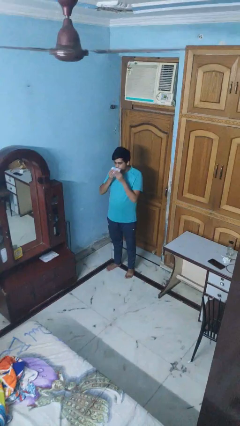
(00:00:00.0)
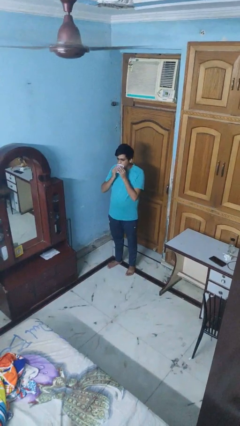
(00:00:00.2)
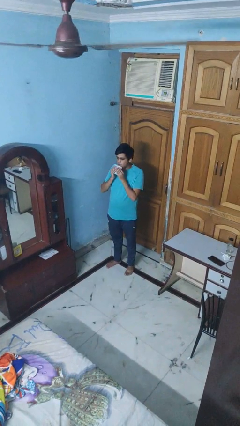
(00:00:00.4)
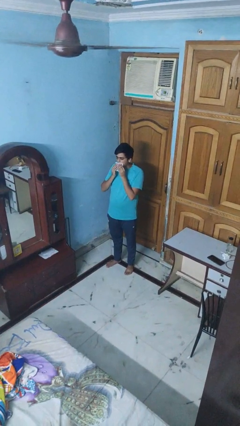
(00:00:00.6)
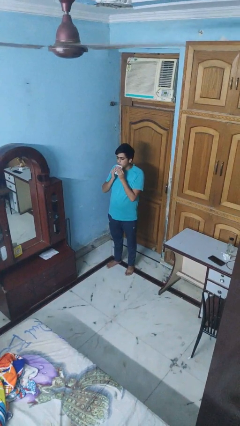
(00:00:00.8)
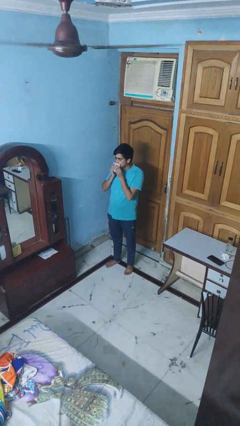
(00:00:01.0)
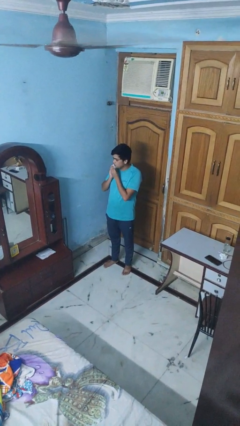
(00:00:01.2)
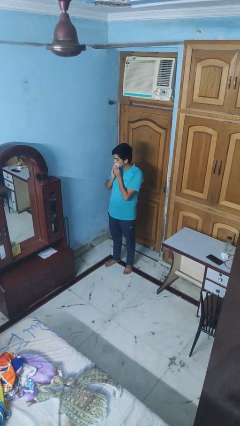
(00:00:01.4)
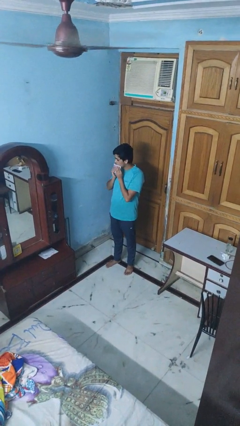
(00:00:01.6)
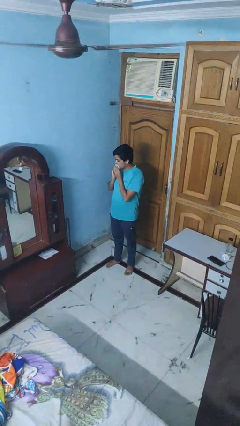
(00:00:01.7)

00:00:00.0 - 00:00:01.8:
person wipes mouth with napkin

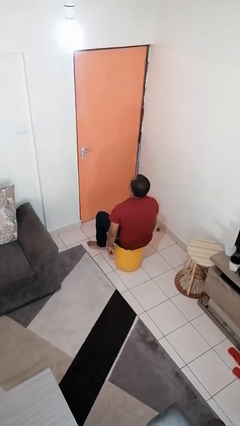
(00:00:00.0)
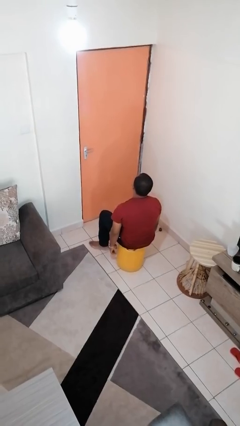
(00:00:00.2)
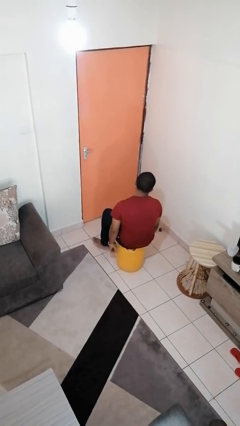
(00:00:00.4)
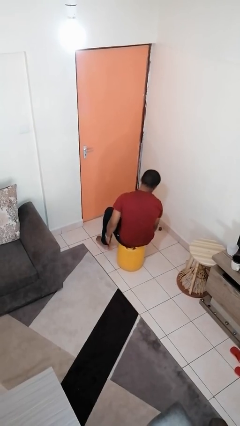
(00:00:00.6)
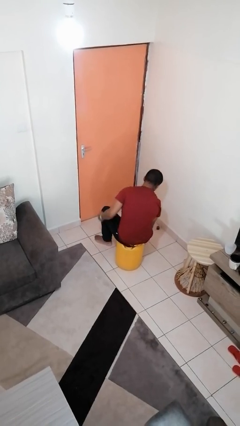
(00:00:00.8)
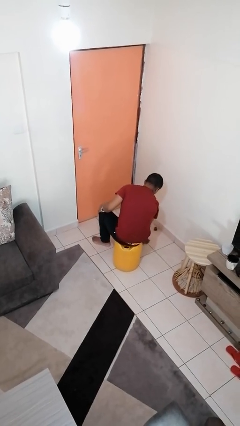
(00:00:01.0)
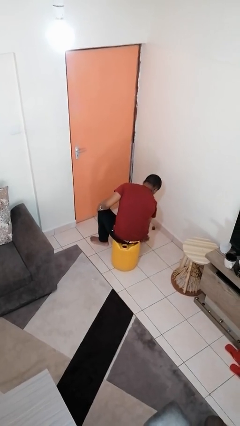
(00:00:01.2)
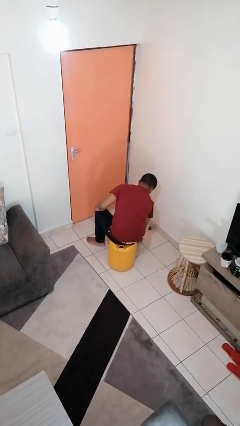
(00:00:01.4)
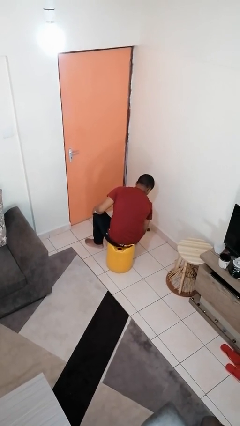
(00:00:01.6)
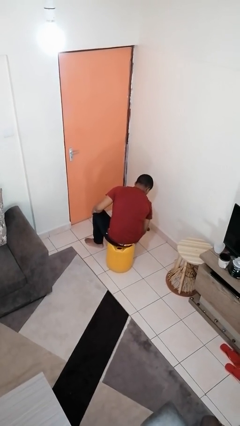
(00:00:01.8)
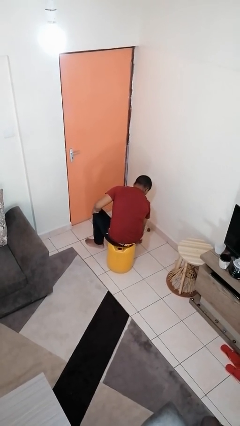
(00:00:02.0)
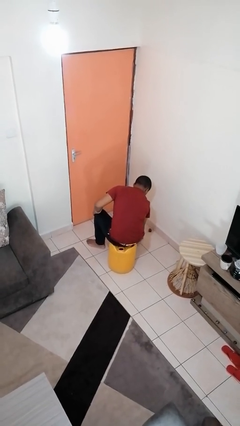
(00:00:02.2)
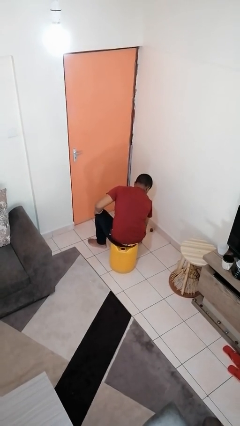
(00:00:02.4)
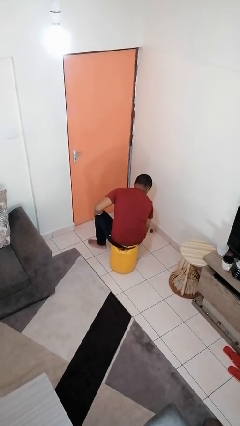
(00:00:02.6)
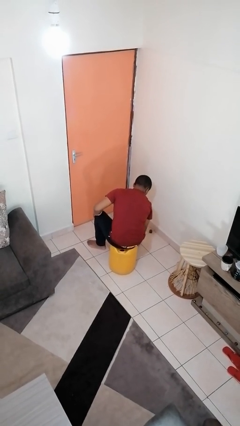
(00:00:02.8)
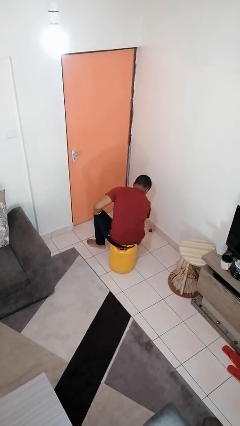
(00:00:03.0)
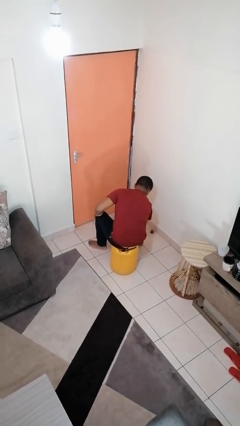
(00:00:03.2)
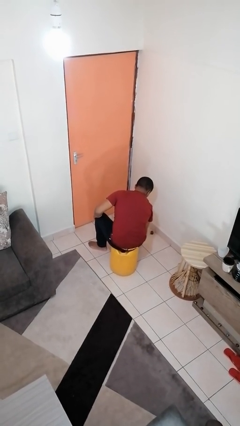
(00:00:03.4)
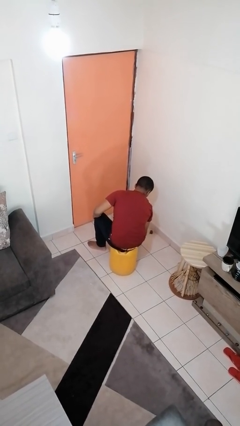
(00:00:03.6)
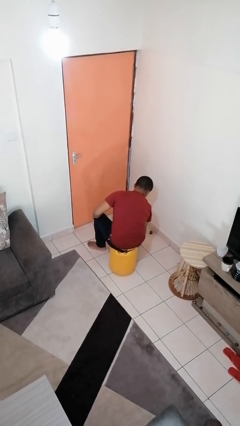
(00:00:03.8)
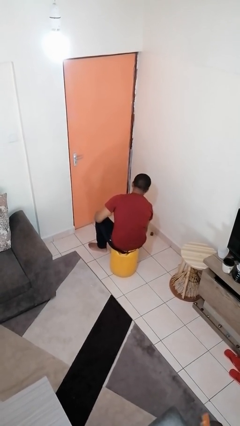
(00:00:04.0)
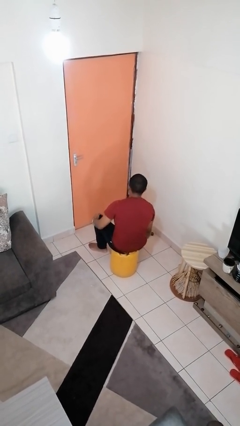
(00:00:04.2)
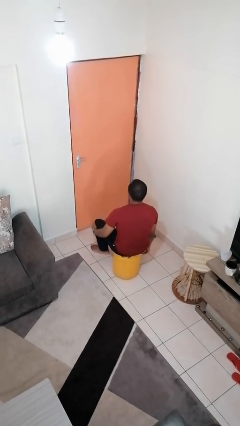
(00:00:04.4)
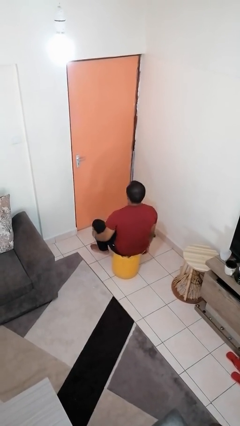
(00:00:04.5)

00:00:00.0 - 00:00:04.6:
person rubs foot

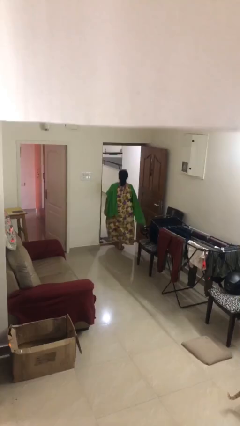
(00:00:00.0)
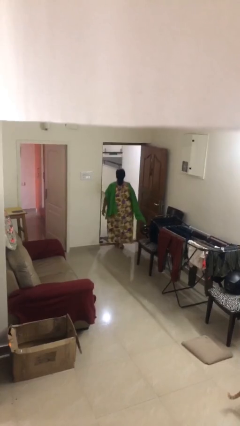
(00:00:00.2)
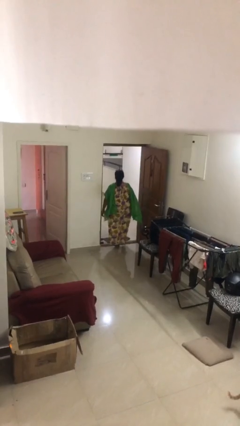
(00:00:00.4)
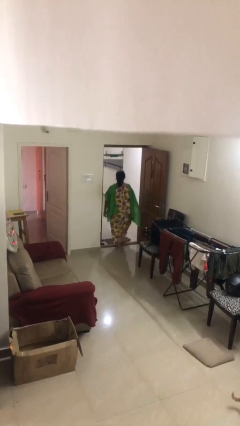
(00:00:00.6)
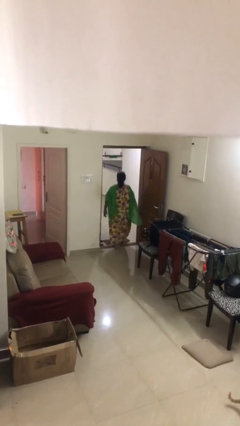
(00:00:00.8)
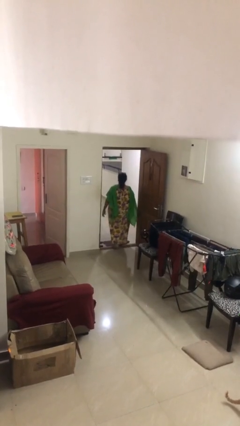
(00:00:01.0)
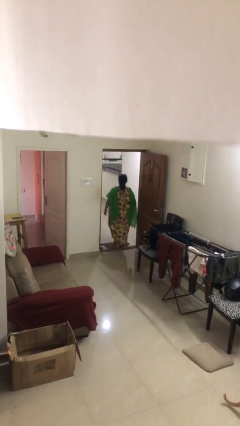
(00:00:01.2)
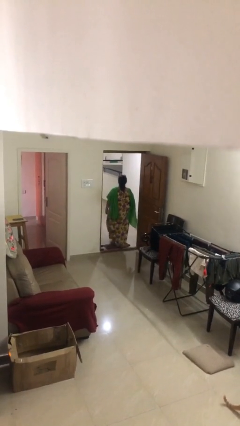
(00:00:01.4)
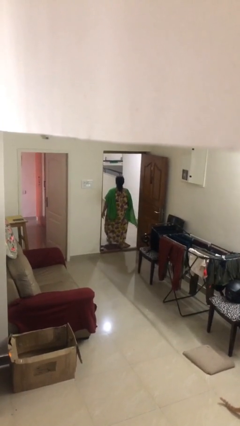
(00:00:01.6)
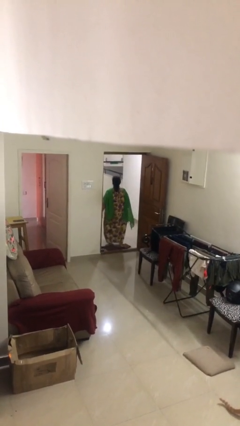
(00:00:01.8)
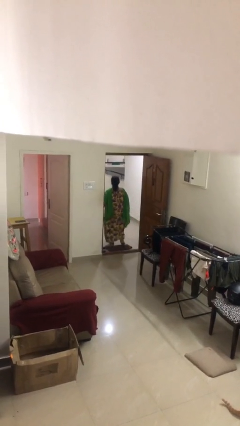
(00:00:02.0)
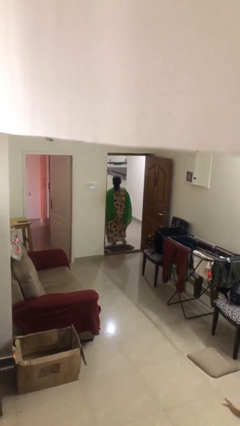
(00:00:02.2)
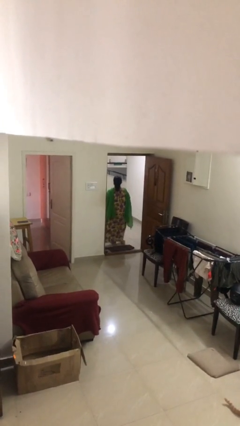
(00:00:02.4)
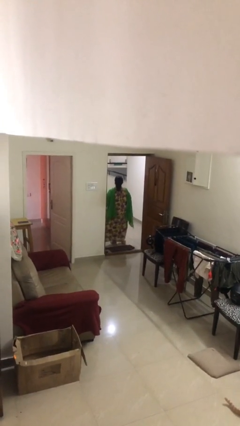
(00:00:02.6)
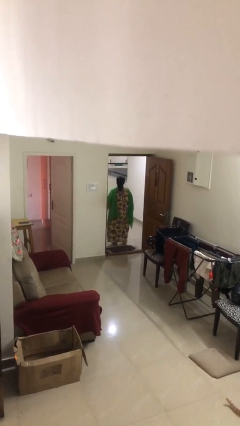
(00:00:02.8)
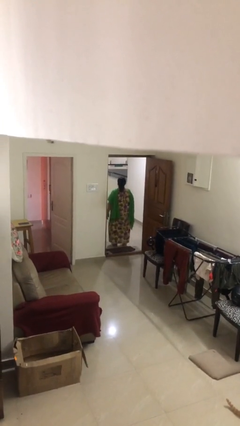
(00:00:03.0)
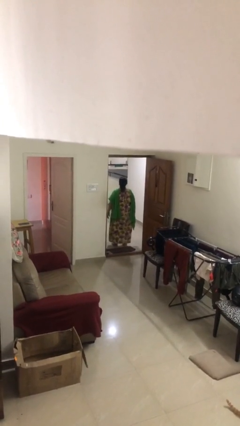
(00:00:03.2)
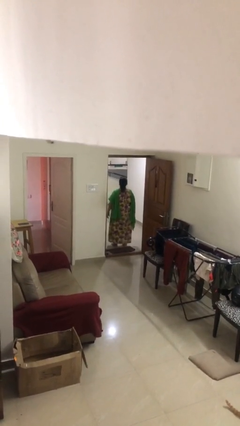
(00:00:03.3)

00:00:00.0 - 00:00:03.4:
person exits scene through structure

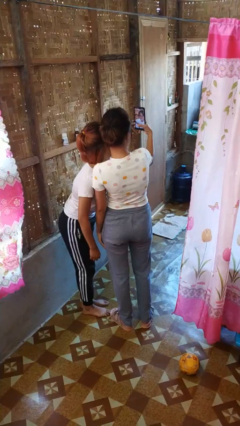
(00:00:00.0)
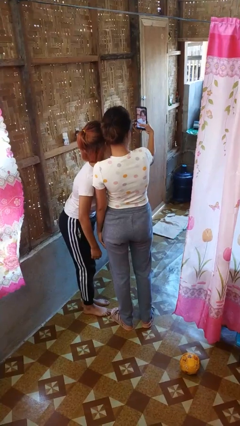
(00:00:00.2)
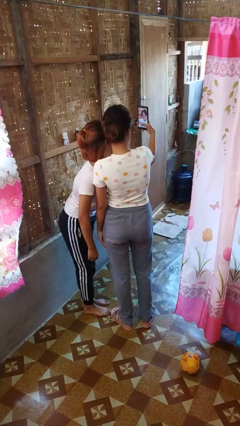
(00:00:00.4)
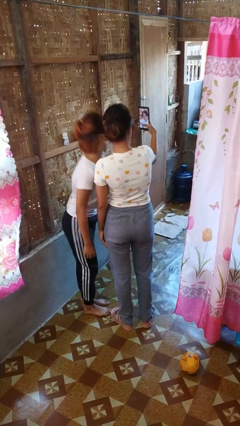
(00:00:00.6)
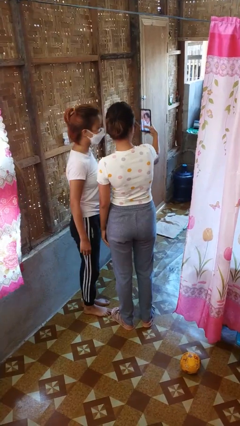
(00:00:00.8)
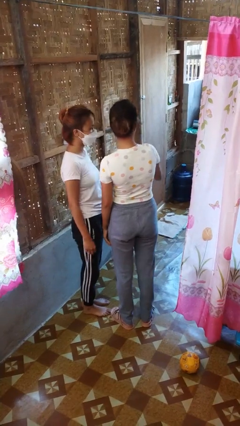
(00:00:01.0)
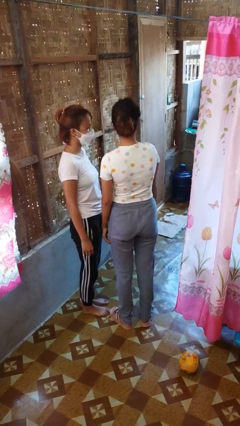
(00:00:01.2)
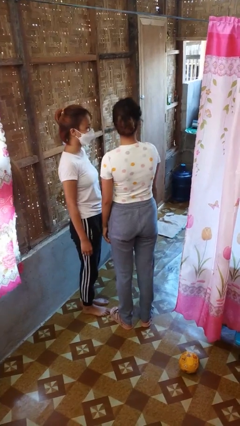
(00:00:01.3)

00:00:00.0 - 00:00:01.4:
person takes selfie with person

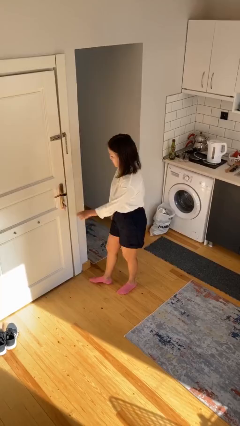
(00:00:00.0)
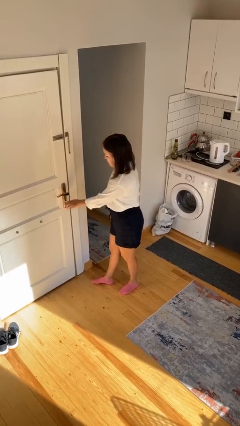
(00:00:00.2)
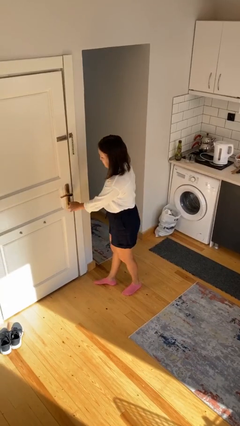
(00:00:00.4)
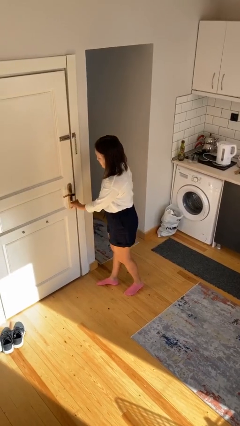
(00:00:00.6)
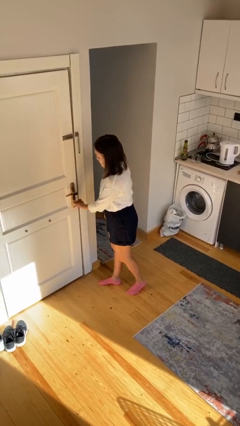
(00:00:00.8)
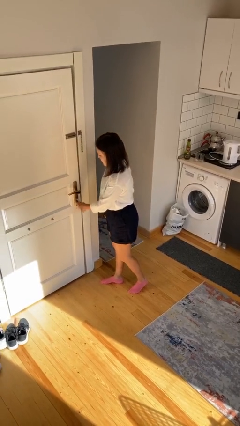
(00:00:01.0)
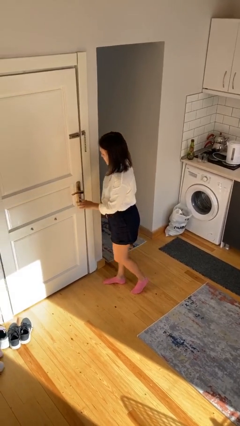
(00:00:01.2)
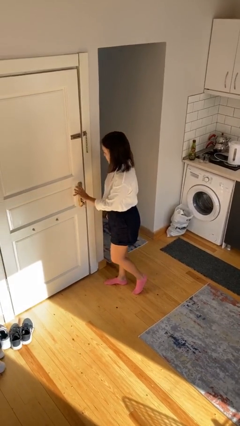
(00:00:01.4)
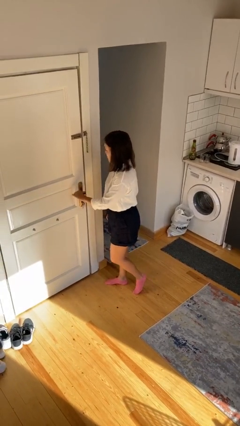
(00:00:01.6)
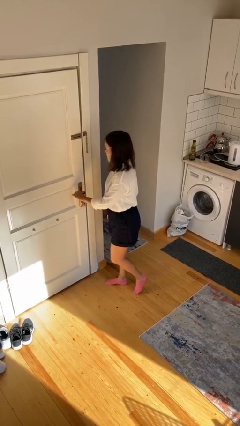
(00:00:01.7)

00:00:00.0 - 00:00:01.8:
person unlocks door with keys

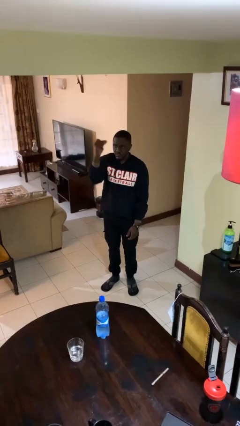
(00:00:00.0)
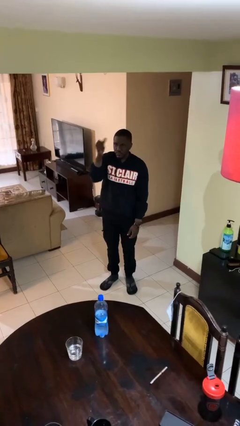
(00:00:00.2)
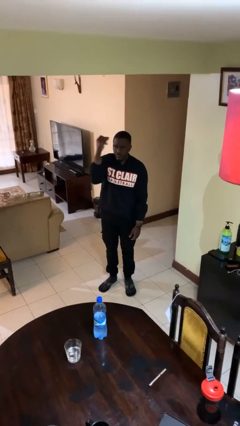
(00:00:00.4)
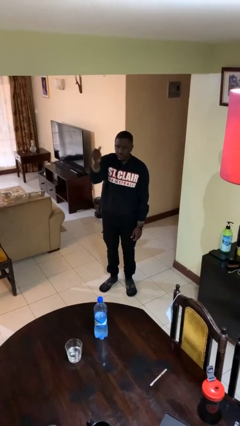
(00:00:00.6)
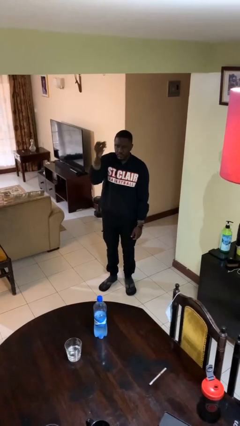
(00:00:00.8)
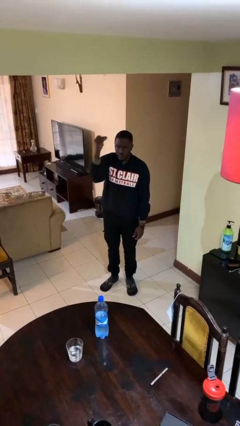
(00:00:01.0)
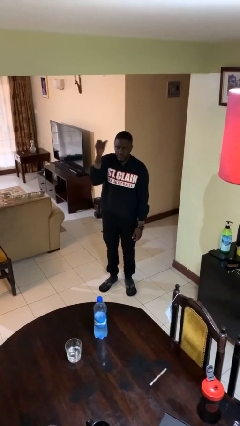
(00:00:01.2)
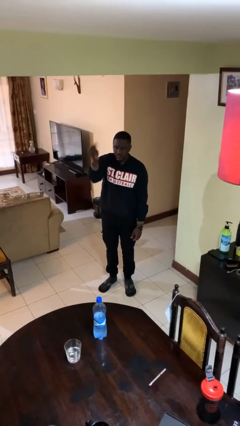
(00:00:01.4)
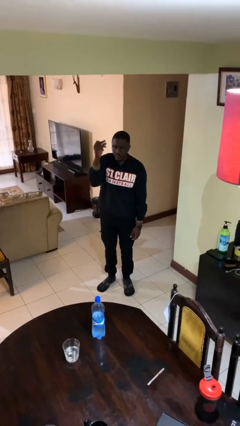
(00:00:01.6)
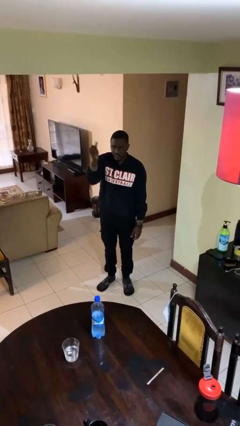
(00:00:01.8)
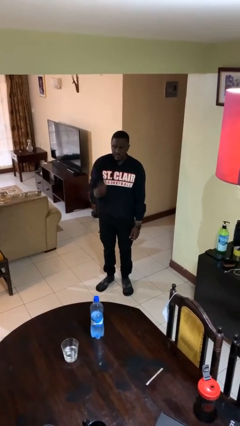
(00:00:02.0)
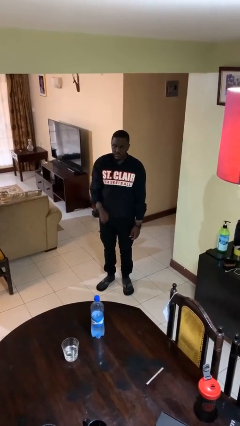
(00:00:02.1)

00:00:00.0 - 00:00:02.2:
person snaps fingers

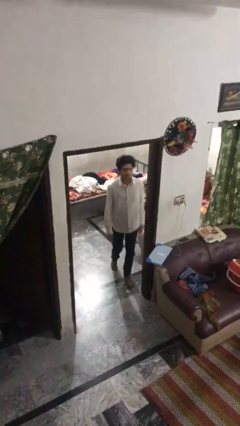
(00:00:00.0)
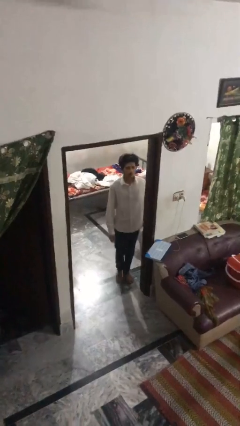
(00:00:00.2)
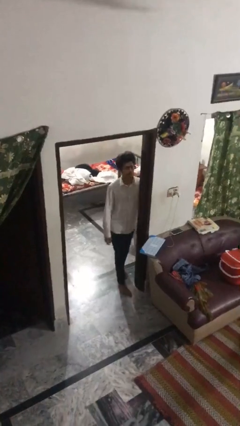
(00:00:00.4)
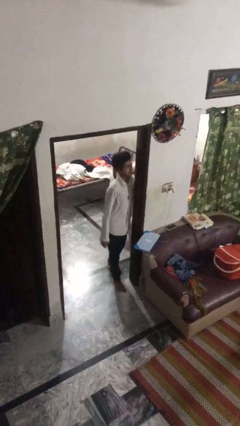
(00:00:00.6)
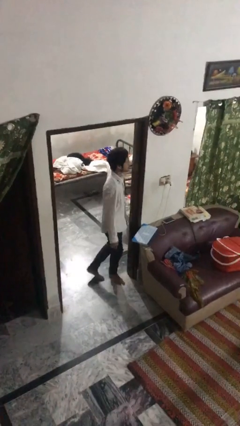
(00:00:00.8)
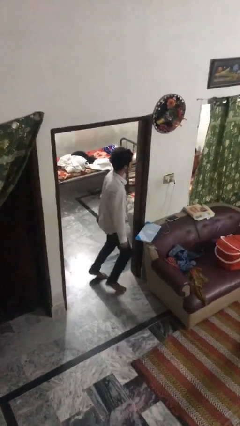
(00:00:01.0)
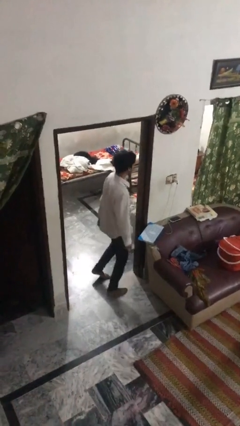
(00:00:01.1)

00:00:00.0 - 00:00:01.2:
person bumps into wall

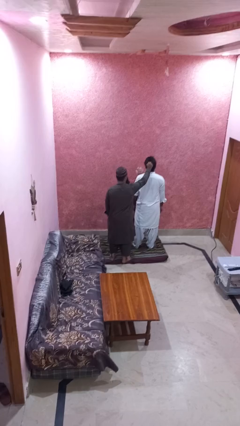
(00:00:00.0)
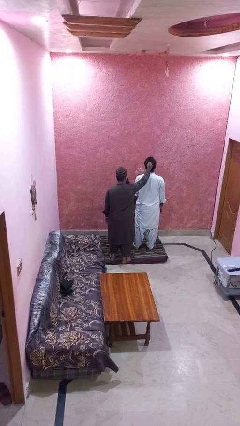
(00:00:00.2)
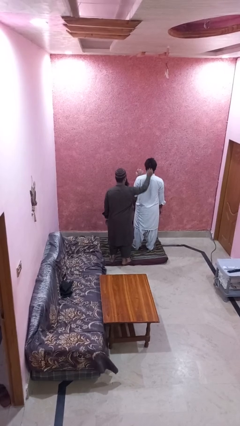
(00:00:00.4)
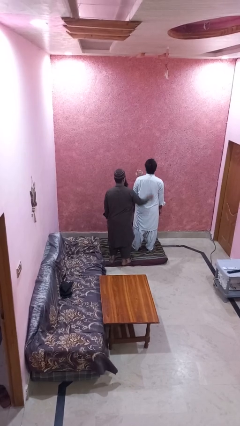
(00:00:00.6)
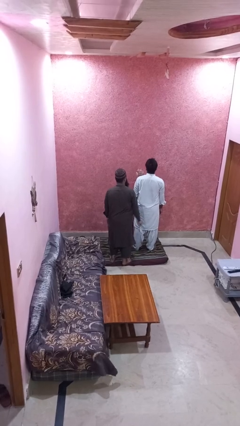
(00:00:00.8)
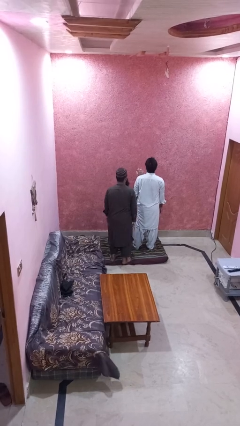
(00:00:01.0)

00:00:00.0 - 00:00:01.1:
person grabs person by hair
